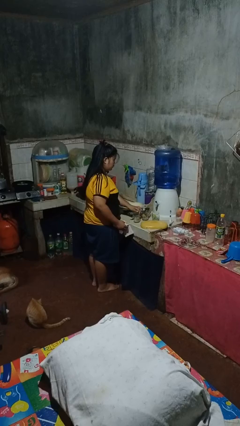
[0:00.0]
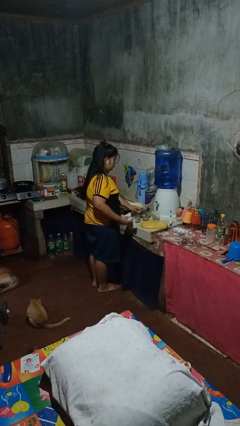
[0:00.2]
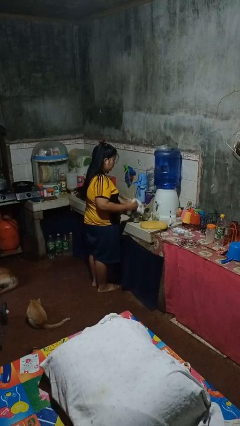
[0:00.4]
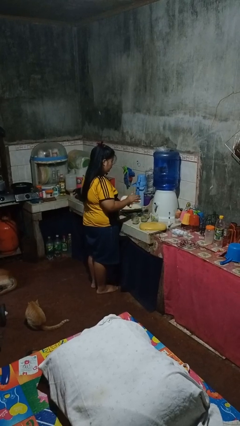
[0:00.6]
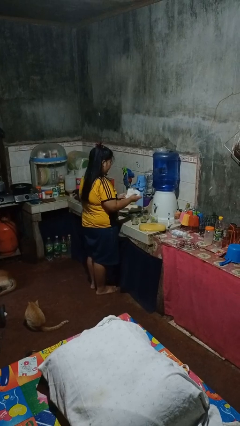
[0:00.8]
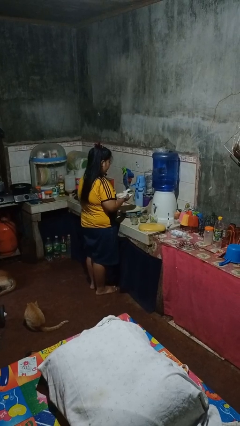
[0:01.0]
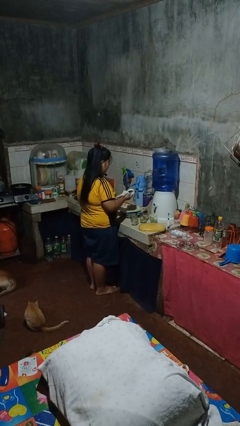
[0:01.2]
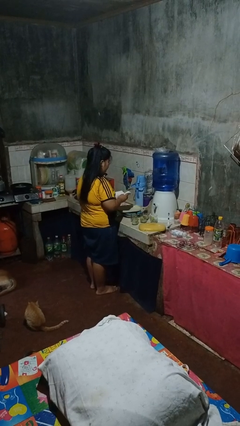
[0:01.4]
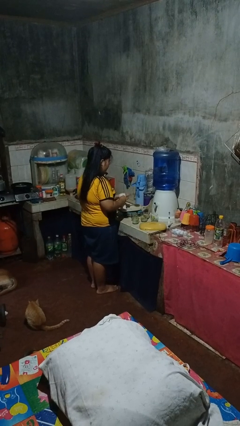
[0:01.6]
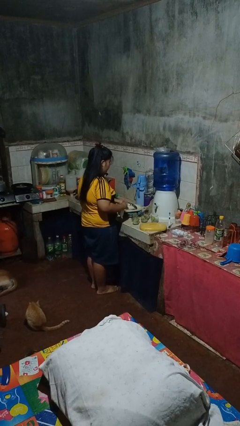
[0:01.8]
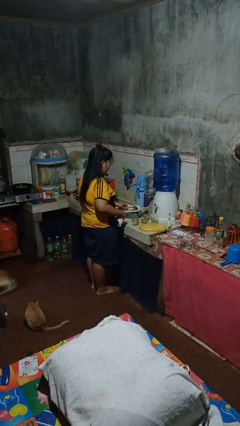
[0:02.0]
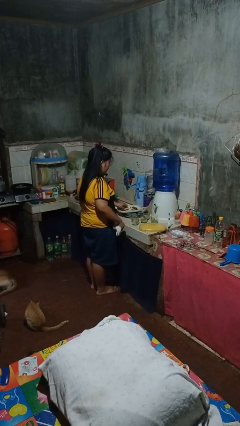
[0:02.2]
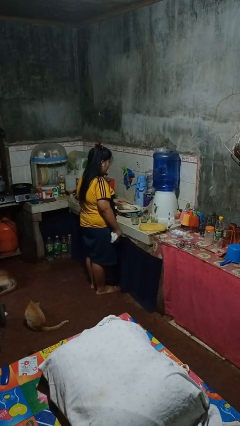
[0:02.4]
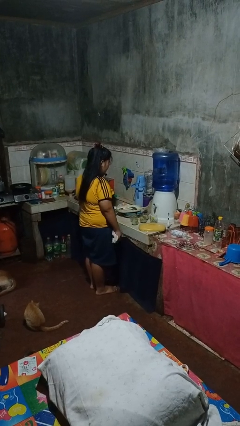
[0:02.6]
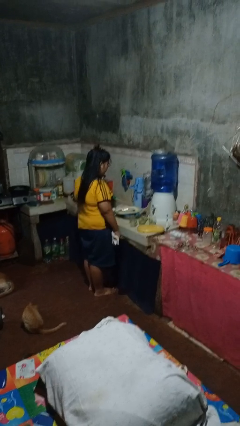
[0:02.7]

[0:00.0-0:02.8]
person dries dish

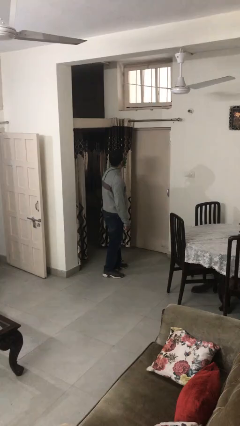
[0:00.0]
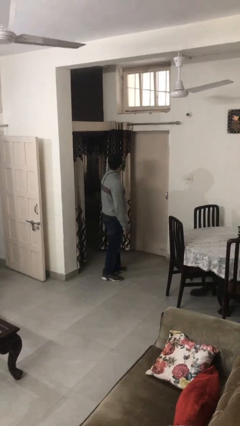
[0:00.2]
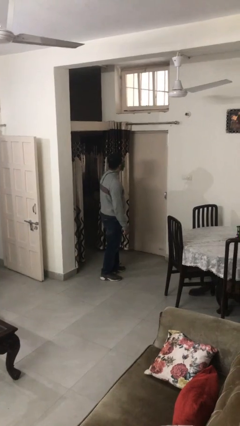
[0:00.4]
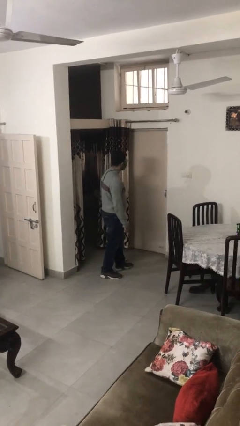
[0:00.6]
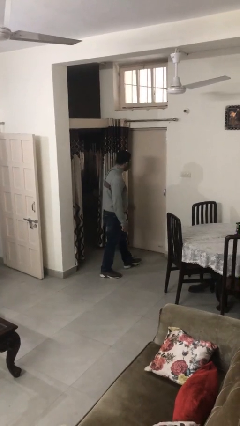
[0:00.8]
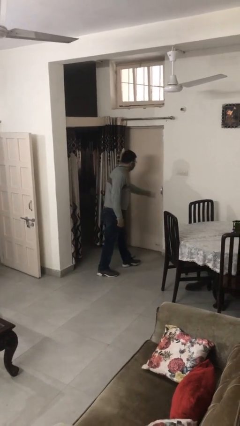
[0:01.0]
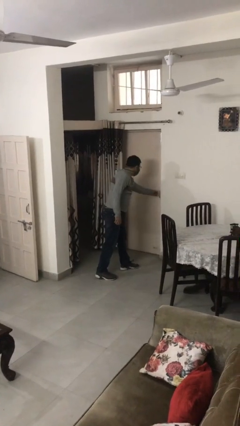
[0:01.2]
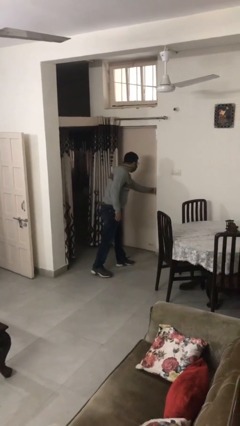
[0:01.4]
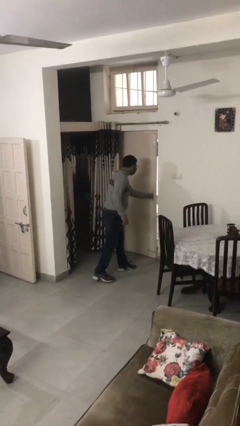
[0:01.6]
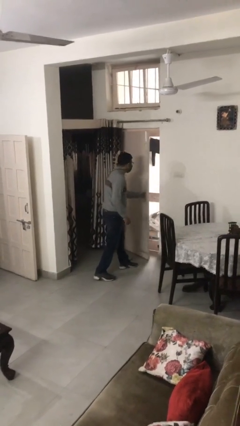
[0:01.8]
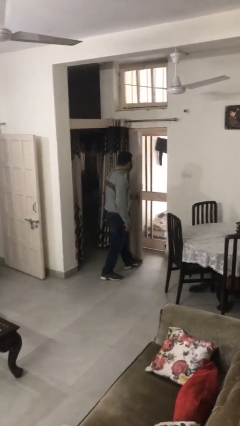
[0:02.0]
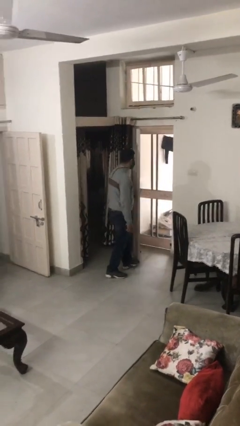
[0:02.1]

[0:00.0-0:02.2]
person opens facility door

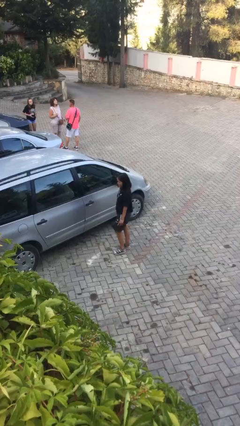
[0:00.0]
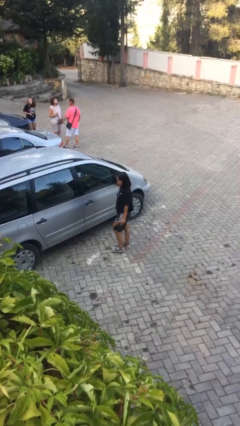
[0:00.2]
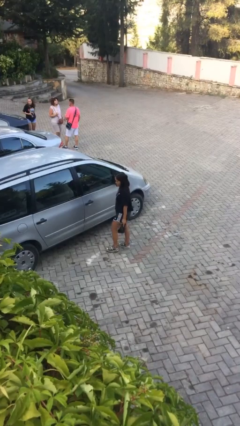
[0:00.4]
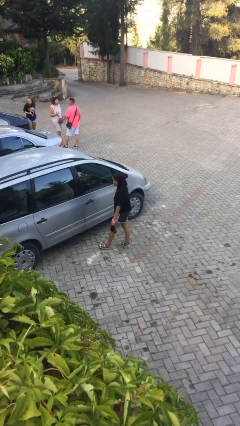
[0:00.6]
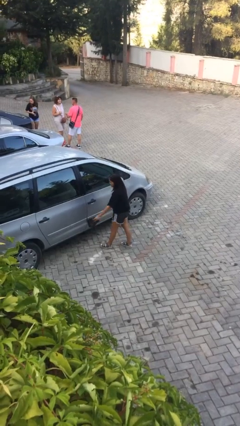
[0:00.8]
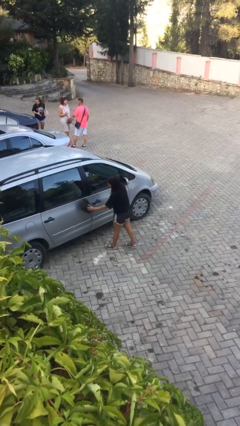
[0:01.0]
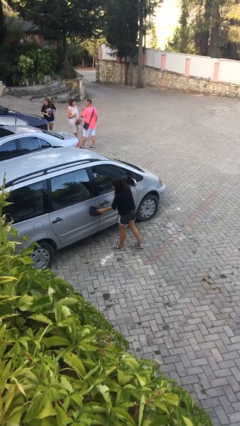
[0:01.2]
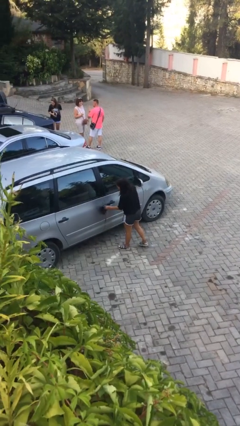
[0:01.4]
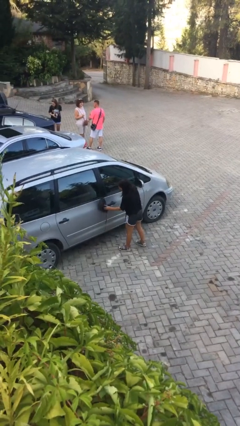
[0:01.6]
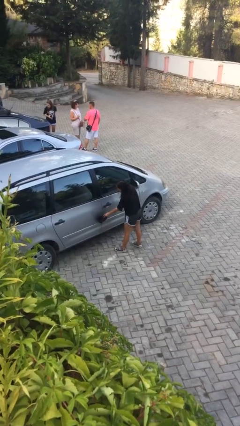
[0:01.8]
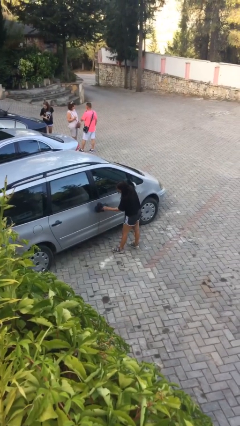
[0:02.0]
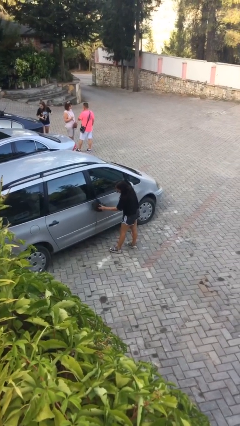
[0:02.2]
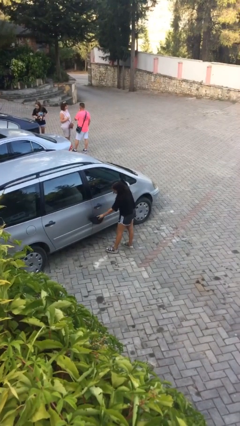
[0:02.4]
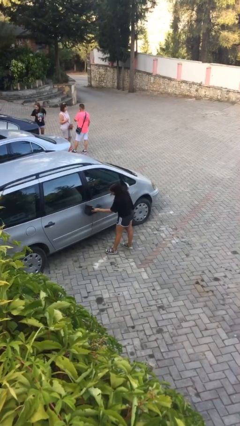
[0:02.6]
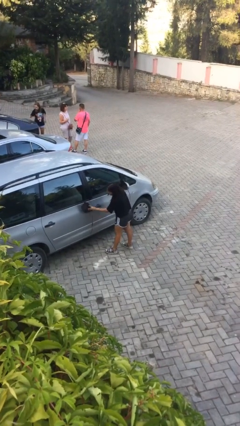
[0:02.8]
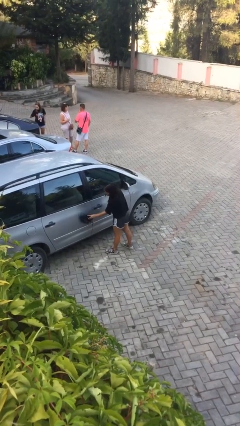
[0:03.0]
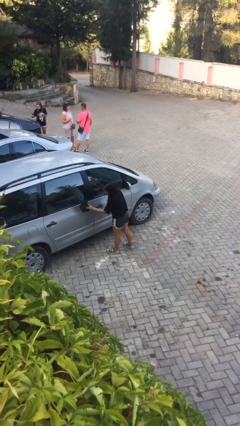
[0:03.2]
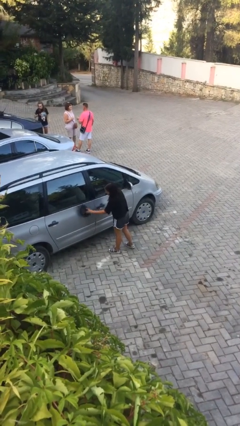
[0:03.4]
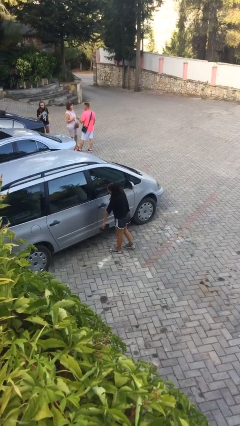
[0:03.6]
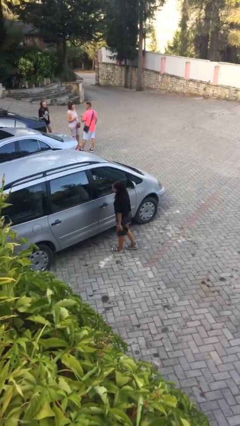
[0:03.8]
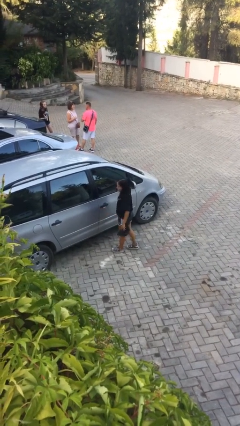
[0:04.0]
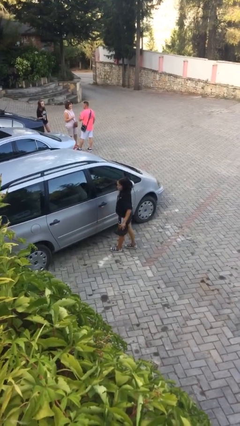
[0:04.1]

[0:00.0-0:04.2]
person polishes car with rag

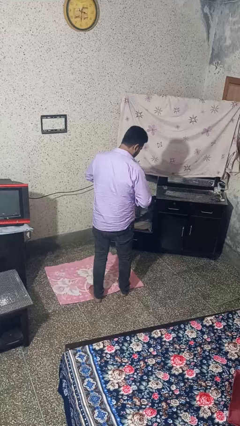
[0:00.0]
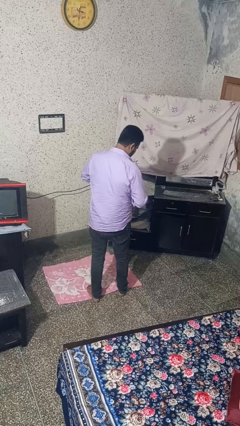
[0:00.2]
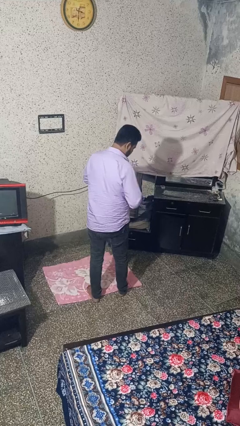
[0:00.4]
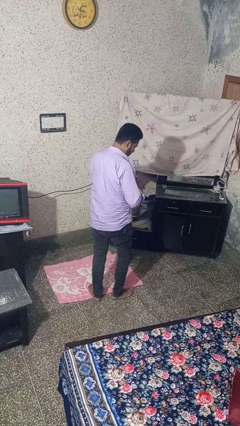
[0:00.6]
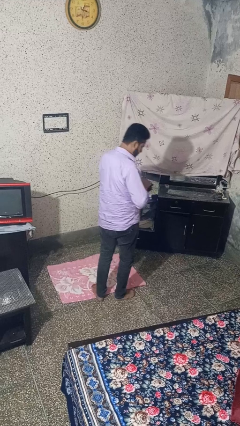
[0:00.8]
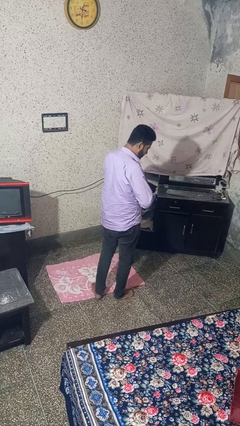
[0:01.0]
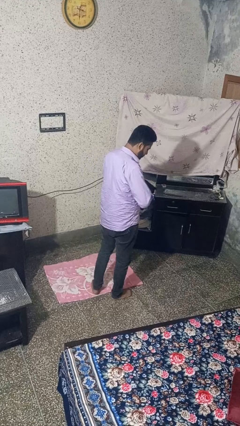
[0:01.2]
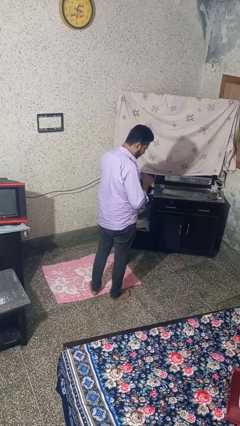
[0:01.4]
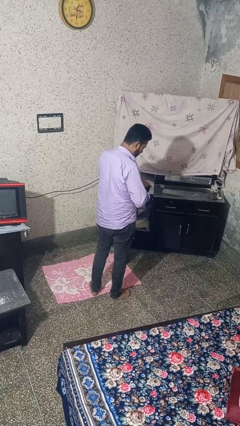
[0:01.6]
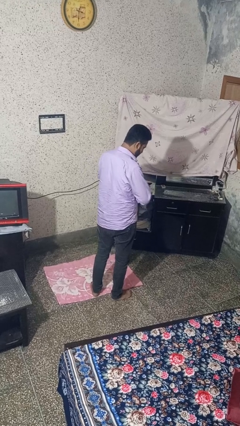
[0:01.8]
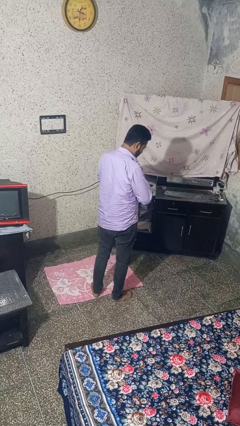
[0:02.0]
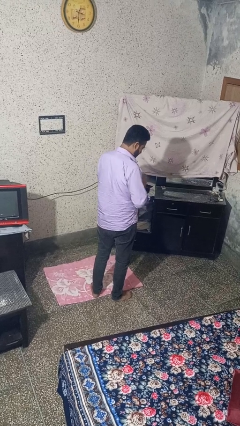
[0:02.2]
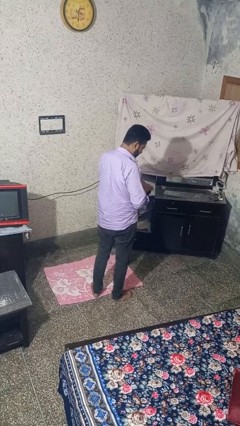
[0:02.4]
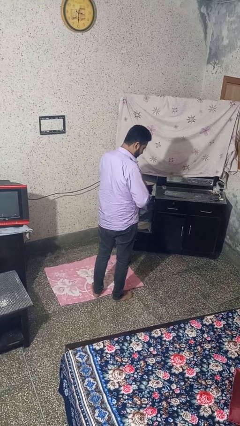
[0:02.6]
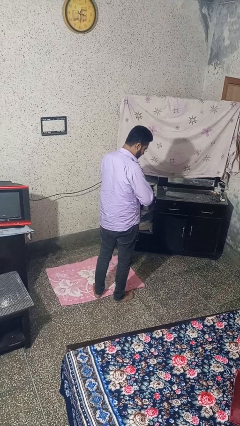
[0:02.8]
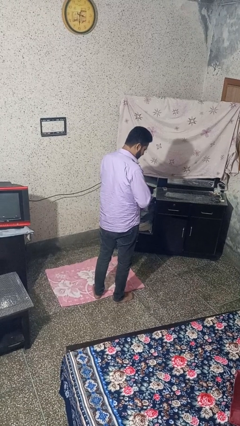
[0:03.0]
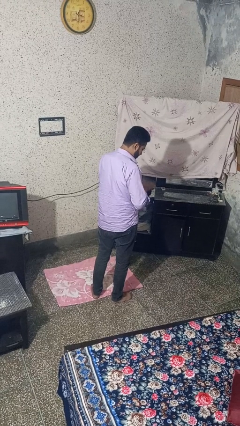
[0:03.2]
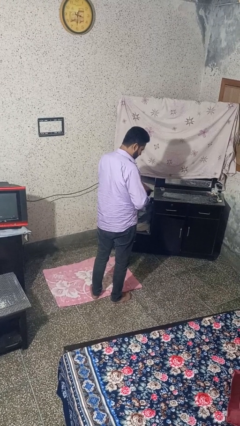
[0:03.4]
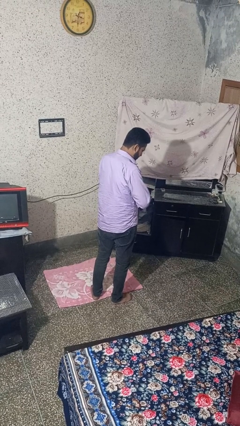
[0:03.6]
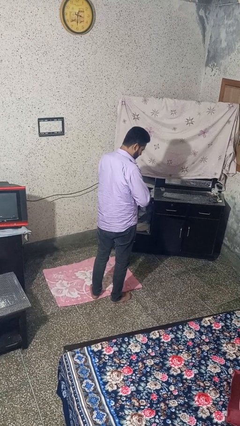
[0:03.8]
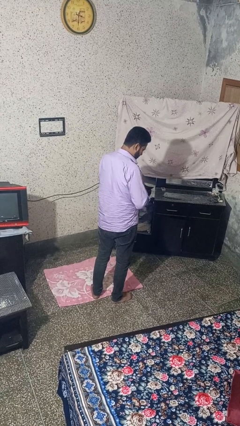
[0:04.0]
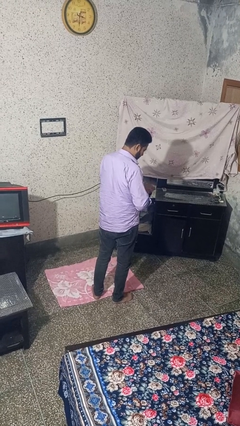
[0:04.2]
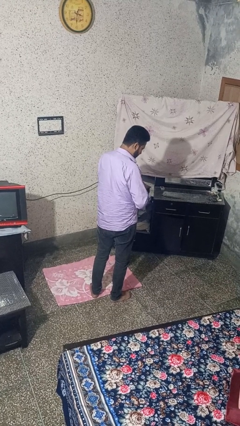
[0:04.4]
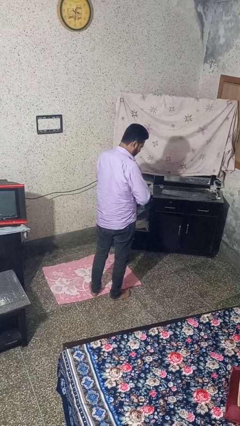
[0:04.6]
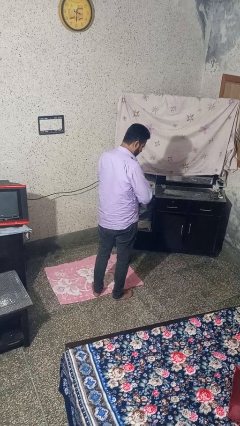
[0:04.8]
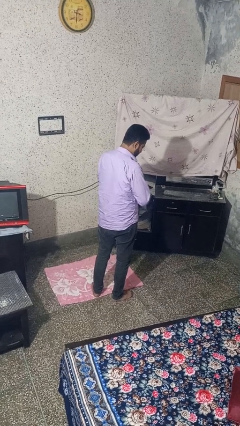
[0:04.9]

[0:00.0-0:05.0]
person pets cat

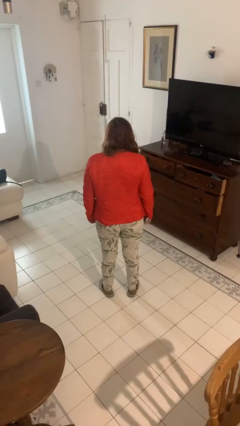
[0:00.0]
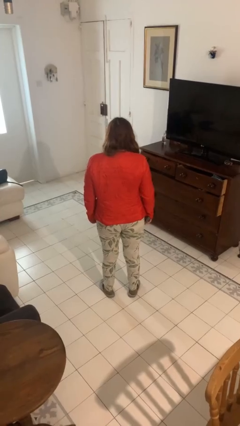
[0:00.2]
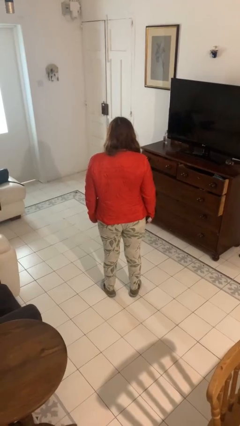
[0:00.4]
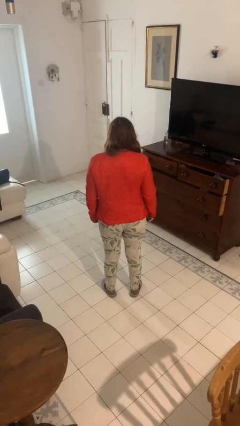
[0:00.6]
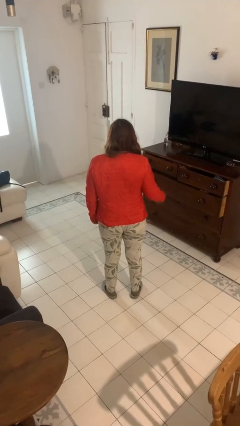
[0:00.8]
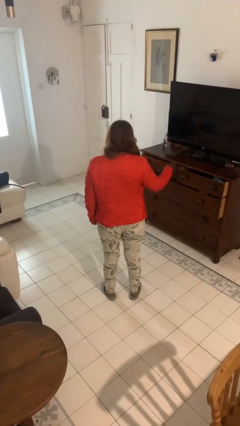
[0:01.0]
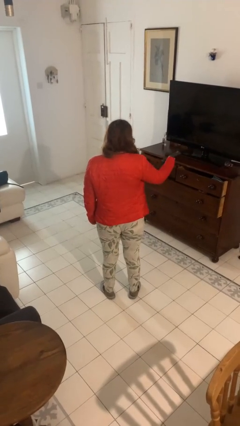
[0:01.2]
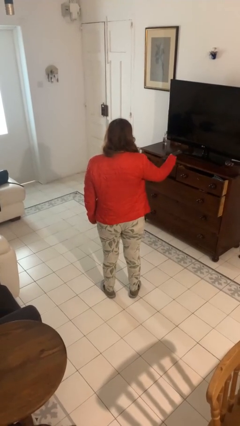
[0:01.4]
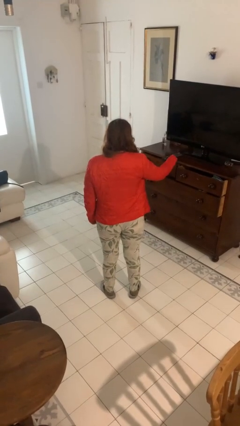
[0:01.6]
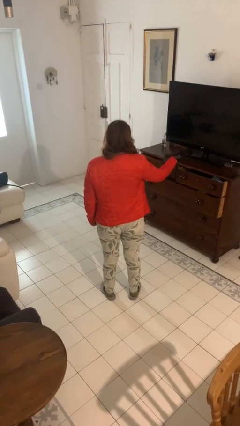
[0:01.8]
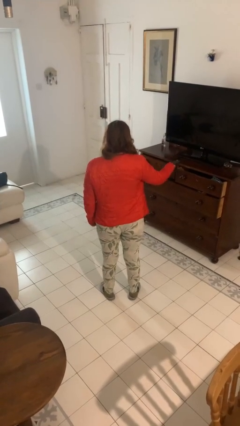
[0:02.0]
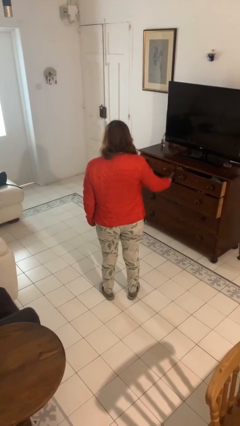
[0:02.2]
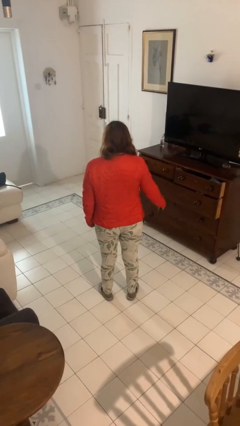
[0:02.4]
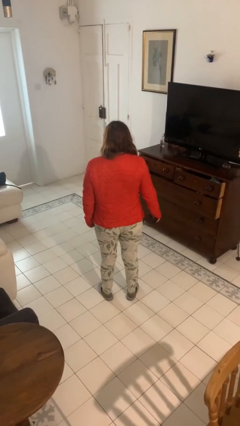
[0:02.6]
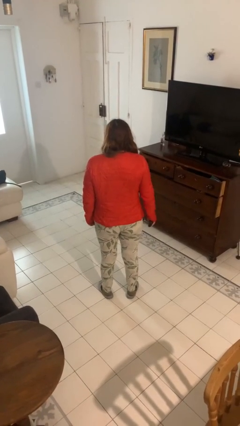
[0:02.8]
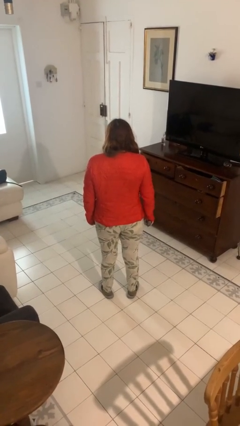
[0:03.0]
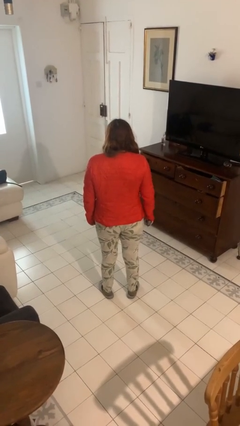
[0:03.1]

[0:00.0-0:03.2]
person uses television remote

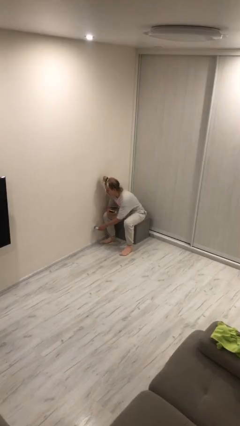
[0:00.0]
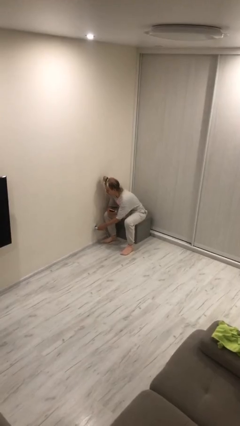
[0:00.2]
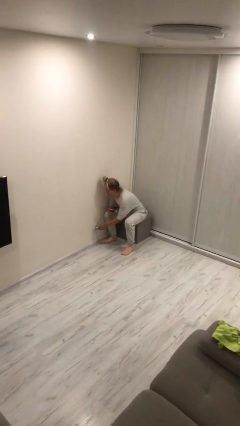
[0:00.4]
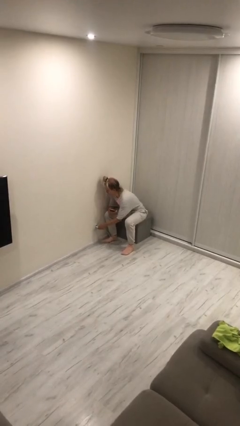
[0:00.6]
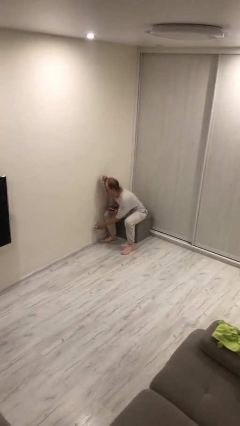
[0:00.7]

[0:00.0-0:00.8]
person plugs into electrical socket
